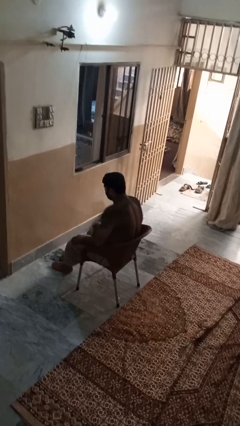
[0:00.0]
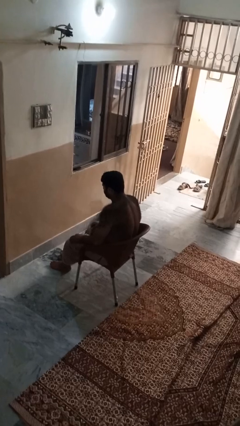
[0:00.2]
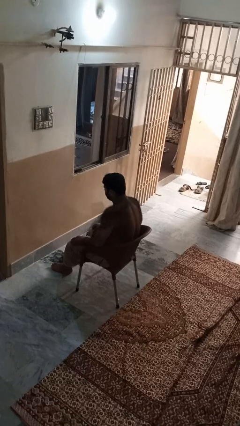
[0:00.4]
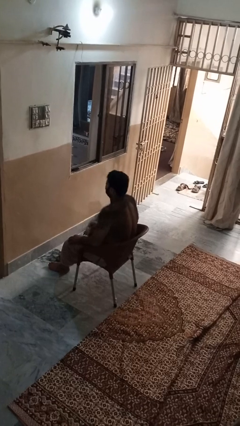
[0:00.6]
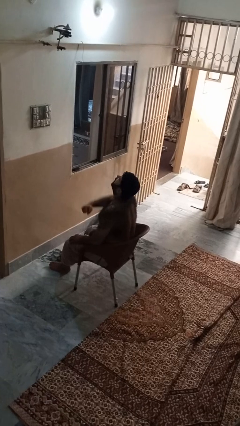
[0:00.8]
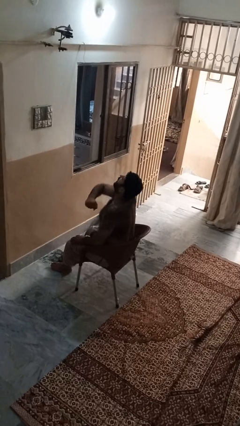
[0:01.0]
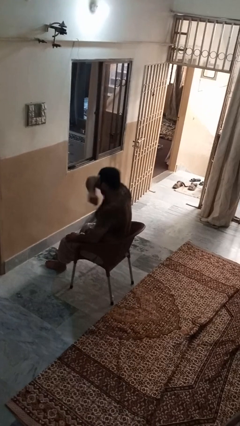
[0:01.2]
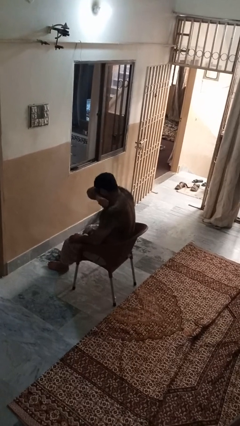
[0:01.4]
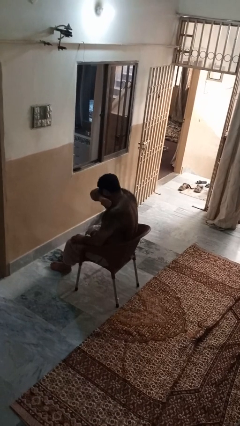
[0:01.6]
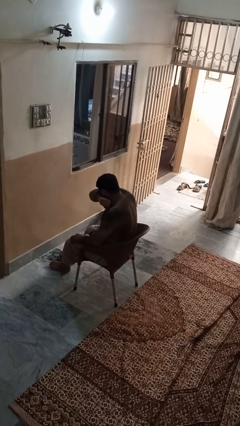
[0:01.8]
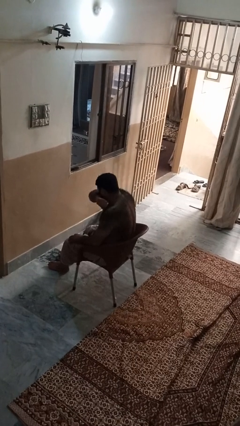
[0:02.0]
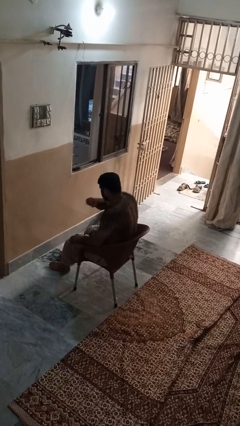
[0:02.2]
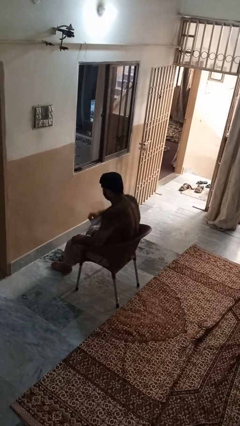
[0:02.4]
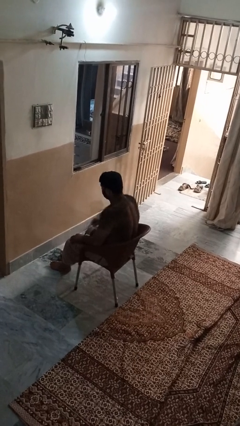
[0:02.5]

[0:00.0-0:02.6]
person sneezes into arm

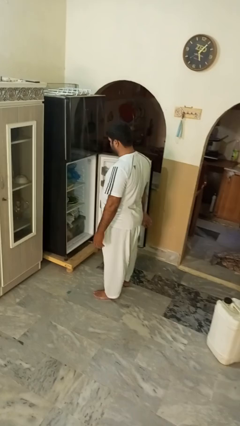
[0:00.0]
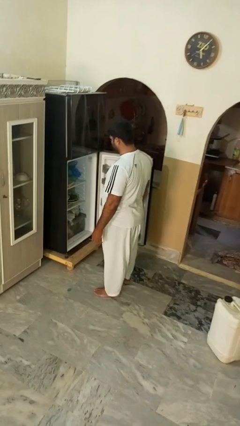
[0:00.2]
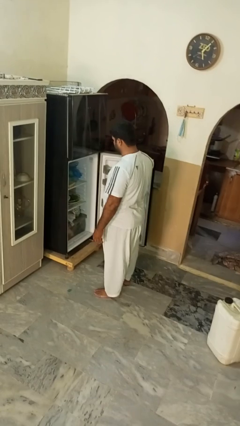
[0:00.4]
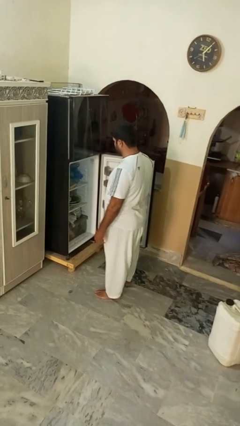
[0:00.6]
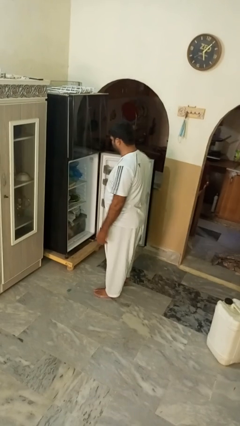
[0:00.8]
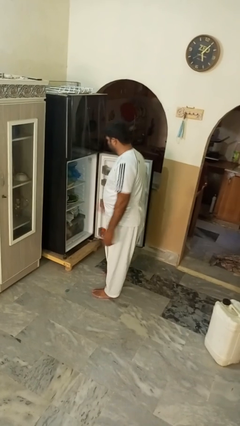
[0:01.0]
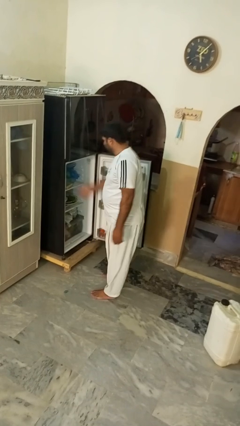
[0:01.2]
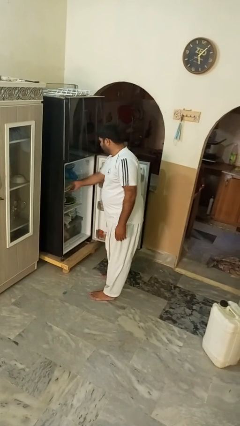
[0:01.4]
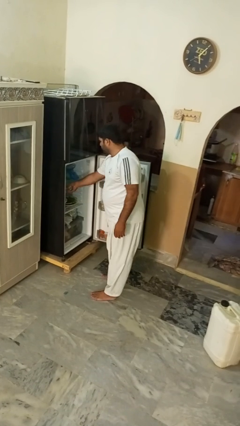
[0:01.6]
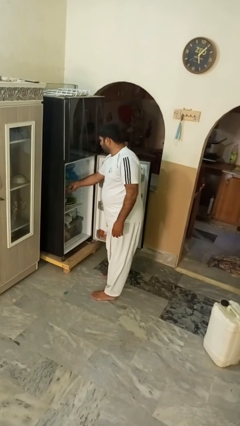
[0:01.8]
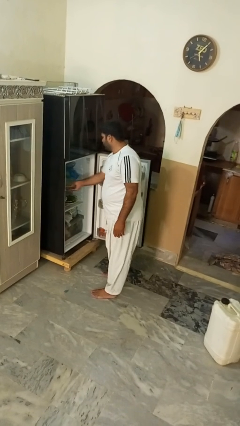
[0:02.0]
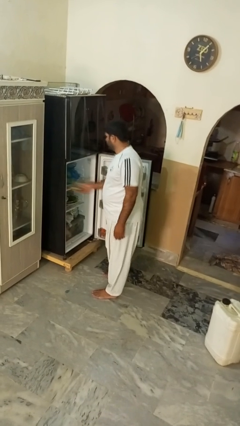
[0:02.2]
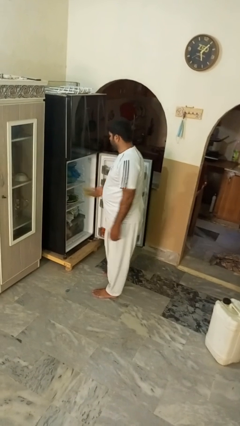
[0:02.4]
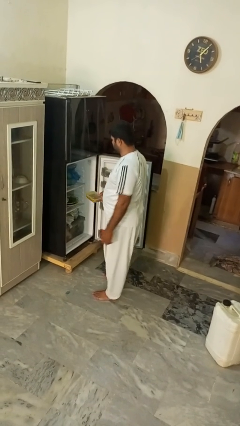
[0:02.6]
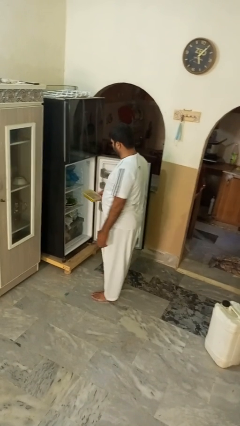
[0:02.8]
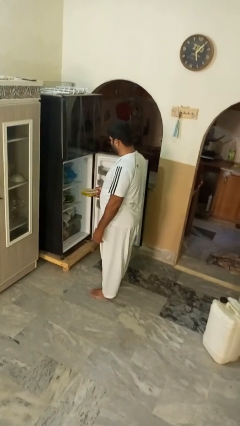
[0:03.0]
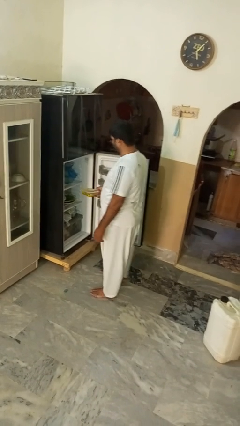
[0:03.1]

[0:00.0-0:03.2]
person takes object from refrigerator

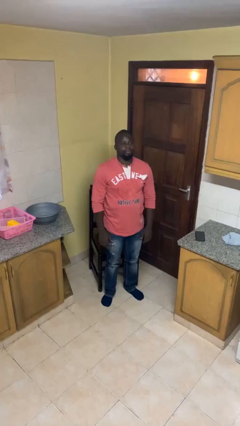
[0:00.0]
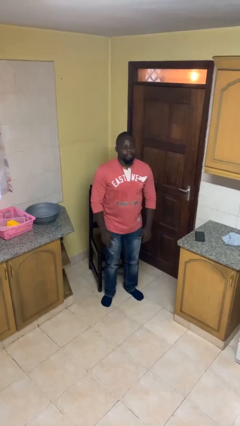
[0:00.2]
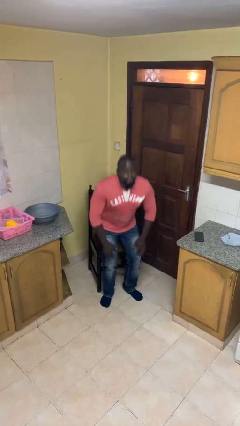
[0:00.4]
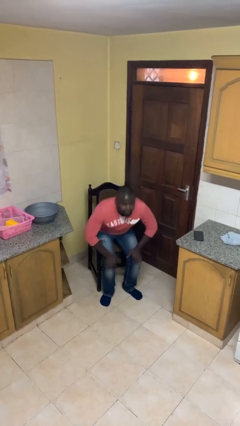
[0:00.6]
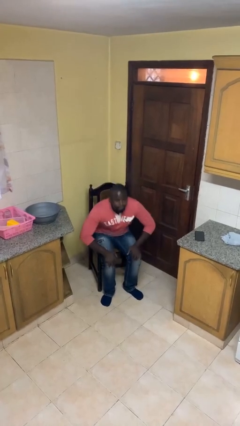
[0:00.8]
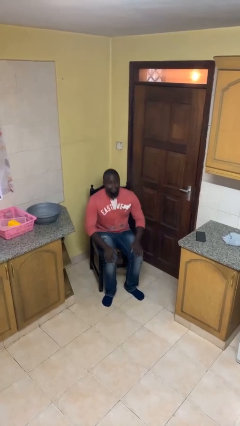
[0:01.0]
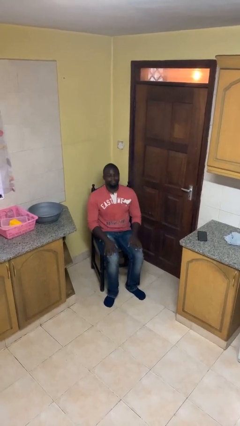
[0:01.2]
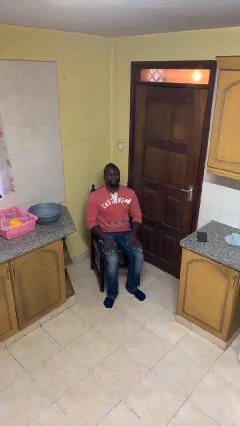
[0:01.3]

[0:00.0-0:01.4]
person sits down

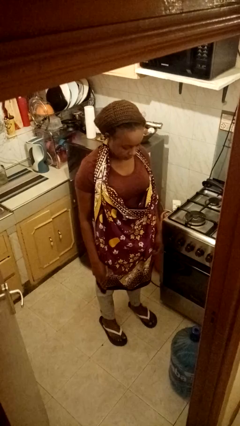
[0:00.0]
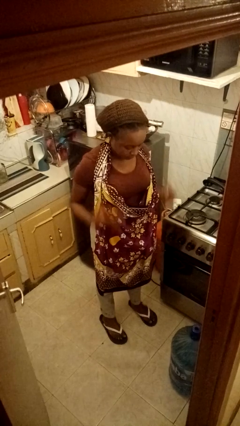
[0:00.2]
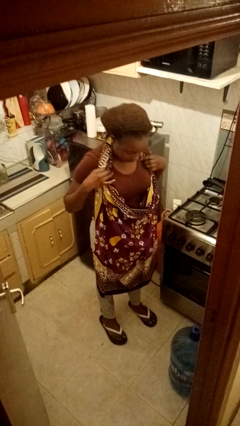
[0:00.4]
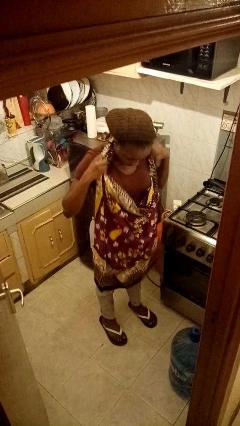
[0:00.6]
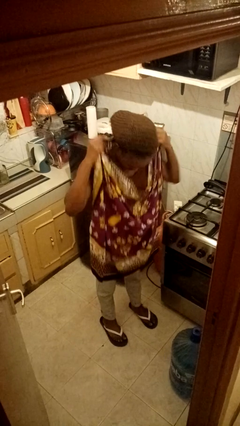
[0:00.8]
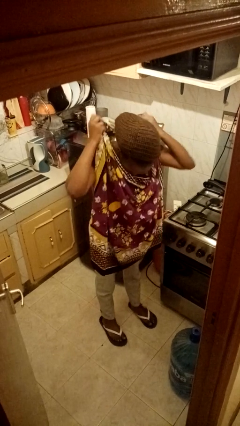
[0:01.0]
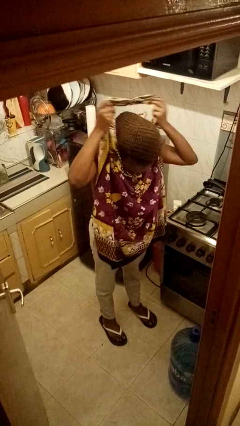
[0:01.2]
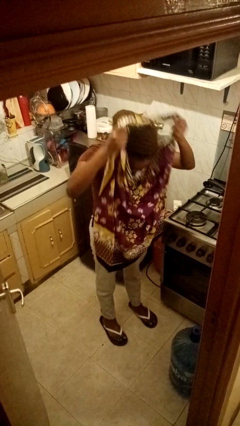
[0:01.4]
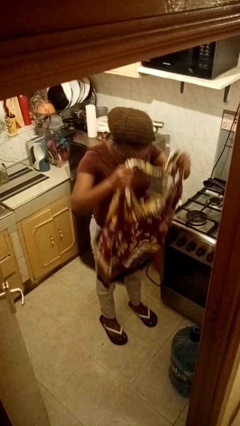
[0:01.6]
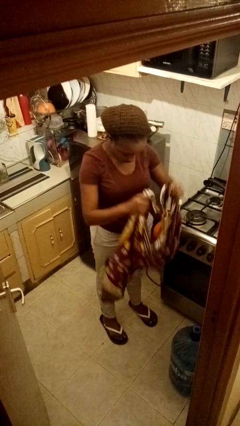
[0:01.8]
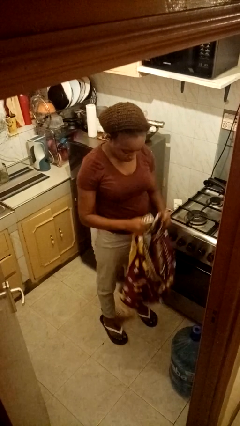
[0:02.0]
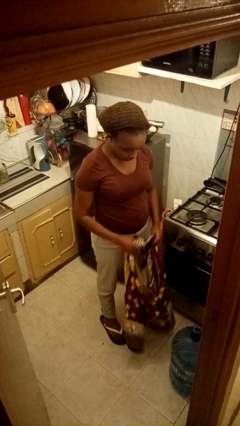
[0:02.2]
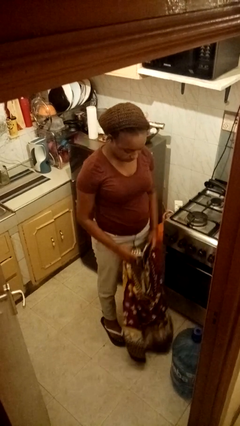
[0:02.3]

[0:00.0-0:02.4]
person takes off apron

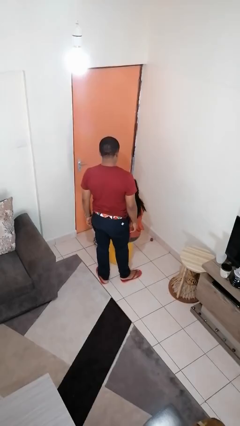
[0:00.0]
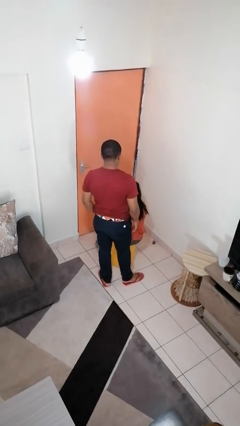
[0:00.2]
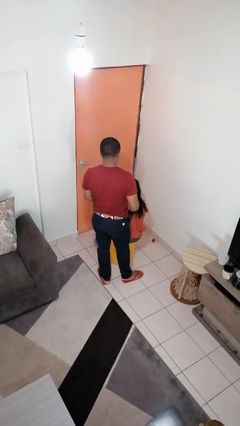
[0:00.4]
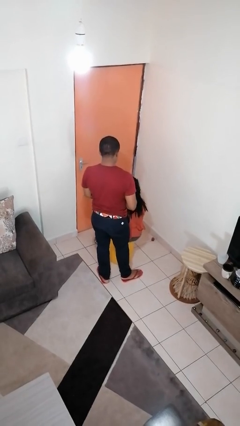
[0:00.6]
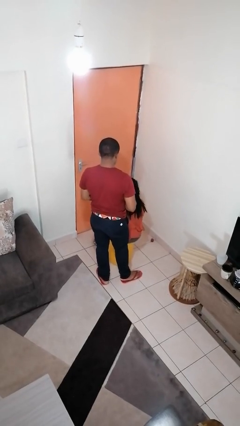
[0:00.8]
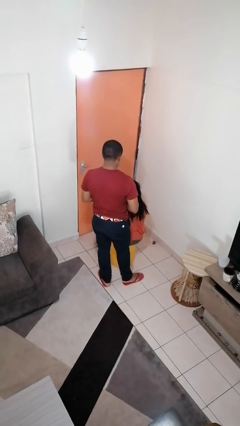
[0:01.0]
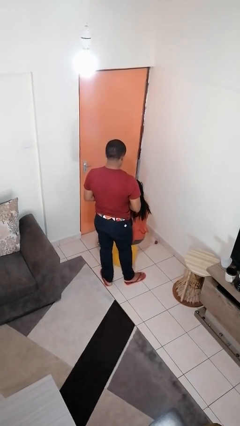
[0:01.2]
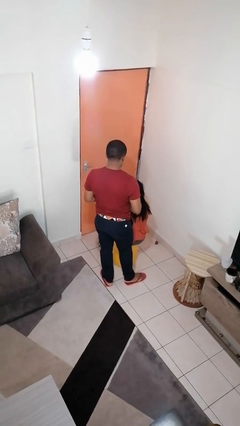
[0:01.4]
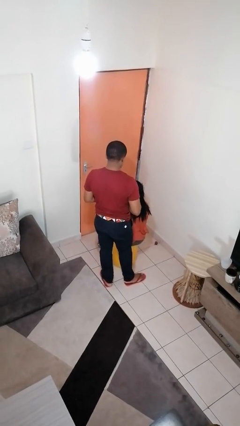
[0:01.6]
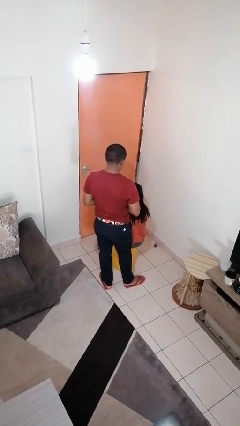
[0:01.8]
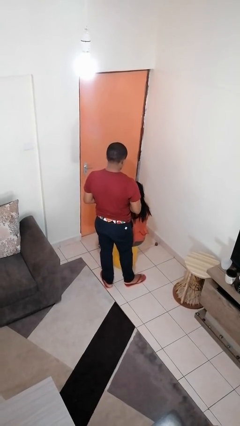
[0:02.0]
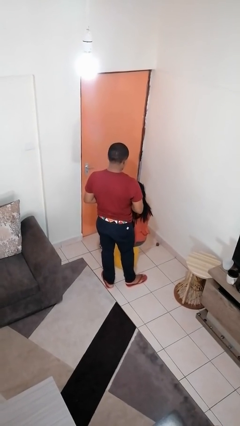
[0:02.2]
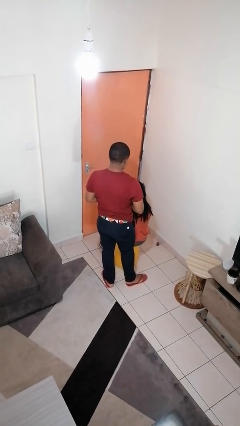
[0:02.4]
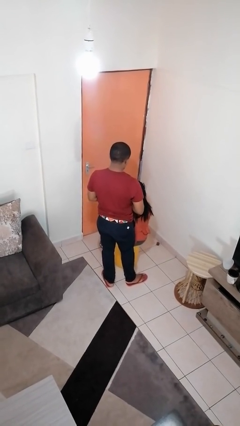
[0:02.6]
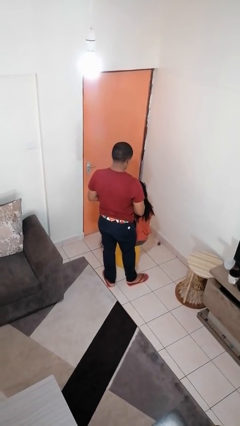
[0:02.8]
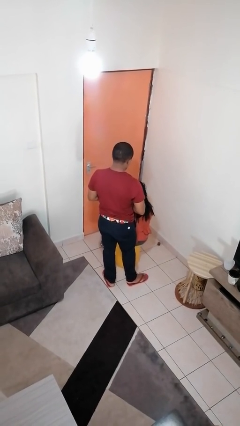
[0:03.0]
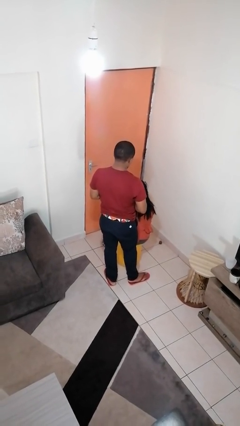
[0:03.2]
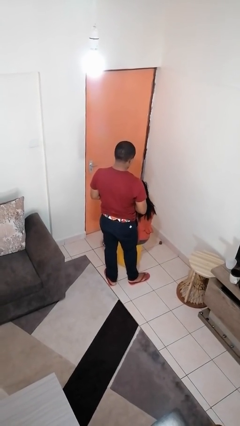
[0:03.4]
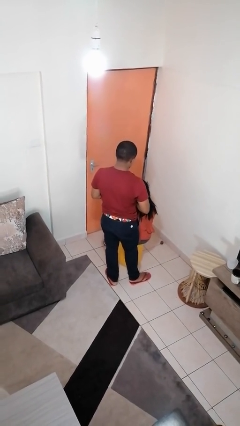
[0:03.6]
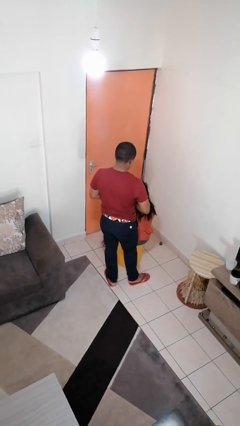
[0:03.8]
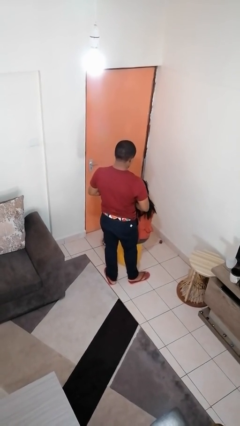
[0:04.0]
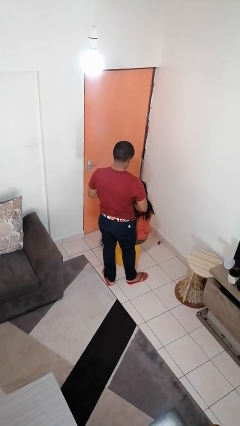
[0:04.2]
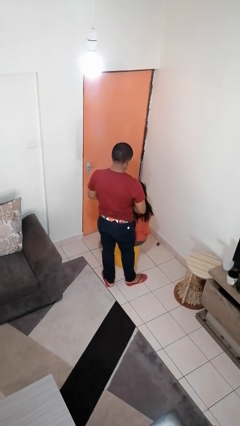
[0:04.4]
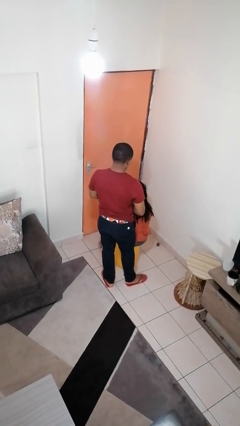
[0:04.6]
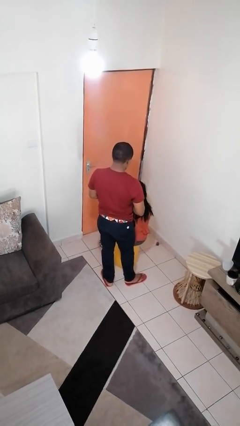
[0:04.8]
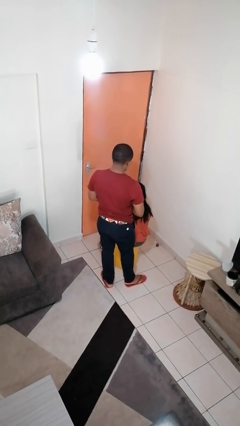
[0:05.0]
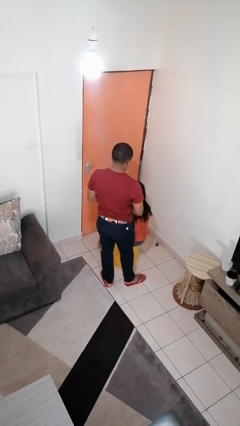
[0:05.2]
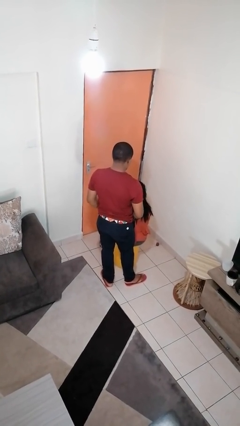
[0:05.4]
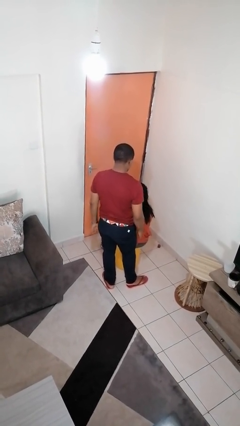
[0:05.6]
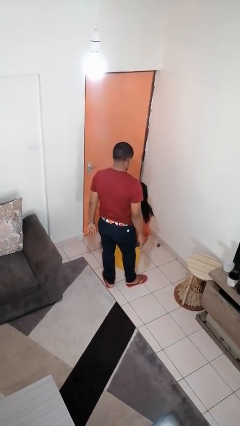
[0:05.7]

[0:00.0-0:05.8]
person braids hair of person

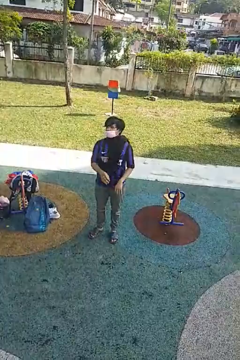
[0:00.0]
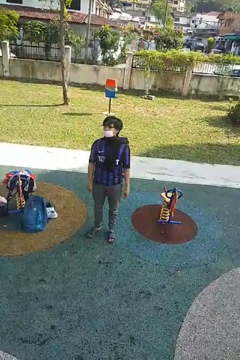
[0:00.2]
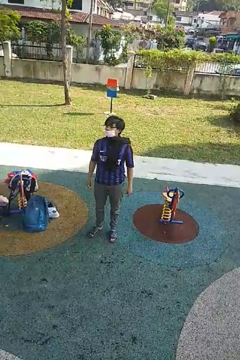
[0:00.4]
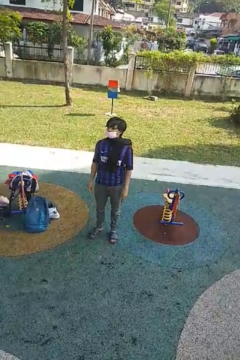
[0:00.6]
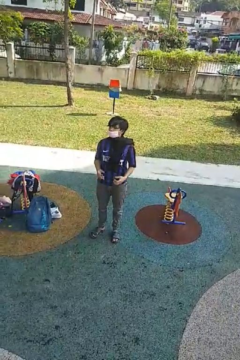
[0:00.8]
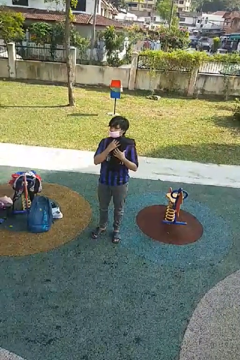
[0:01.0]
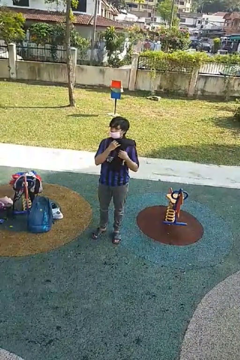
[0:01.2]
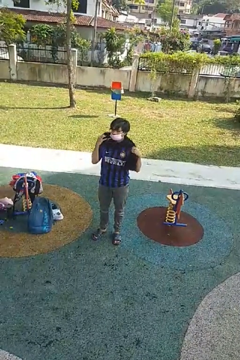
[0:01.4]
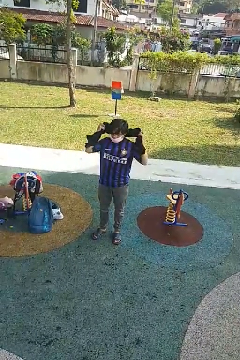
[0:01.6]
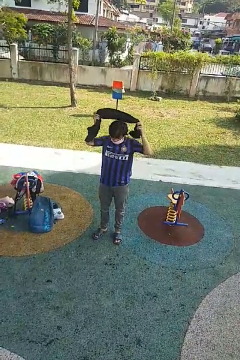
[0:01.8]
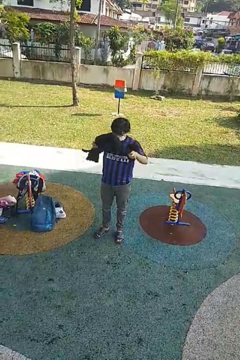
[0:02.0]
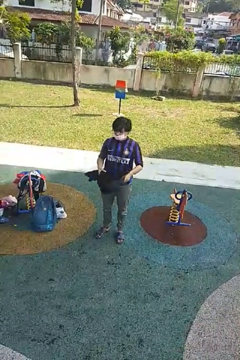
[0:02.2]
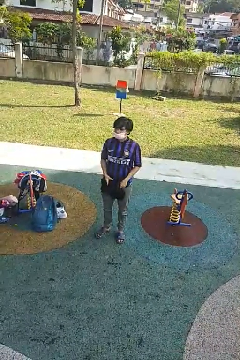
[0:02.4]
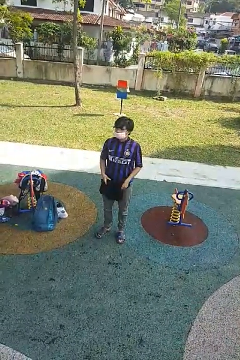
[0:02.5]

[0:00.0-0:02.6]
person takes off scarf
